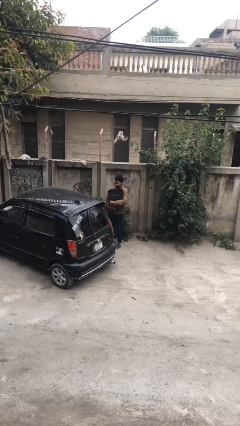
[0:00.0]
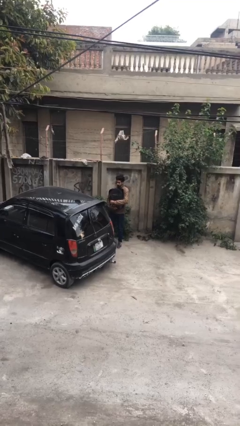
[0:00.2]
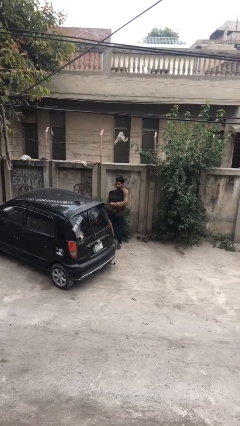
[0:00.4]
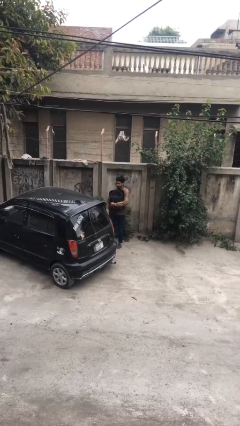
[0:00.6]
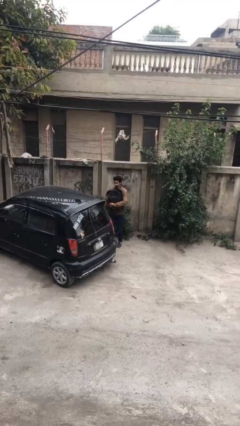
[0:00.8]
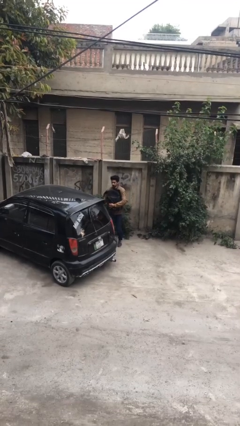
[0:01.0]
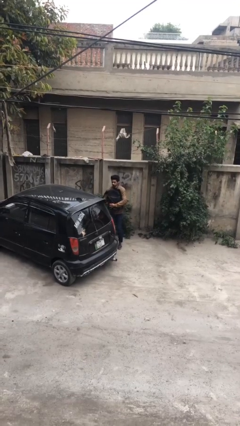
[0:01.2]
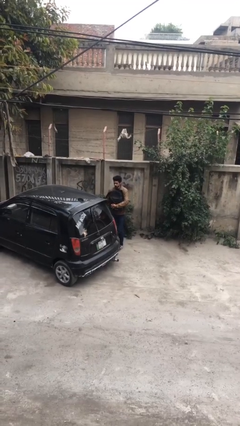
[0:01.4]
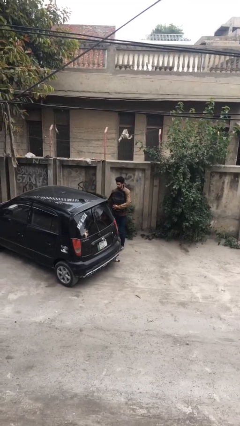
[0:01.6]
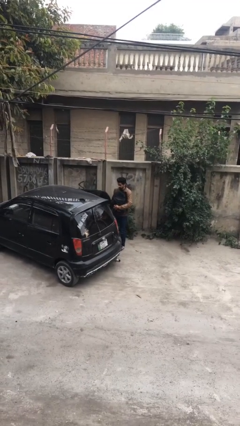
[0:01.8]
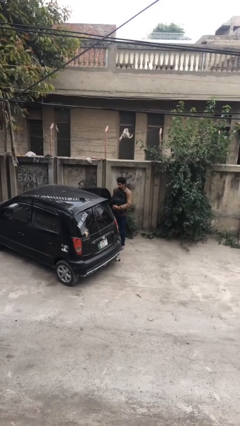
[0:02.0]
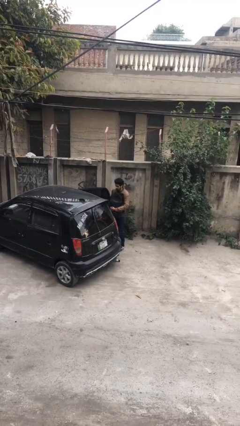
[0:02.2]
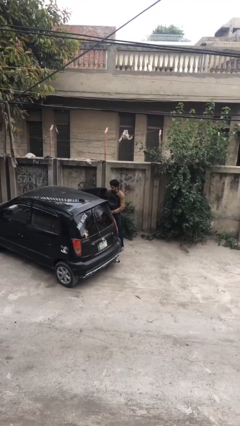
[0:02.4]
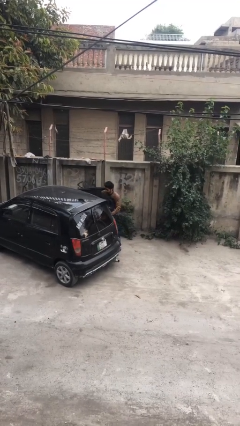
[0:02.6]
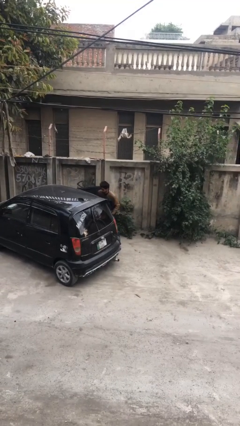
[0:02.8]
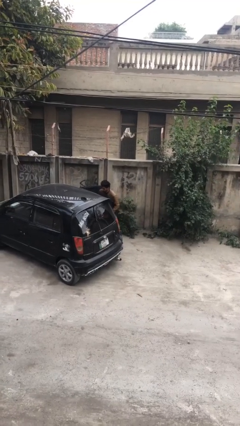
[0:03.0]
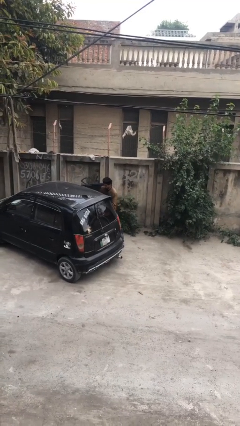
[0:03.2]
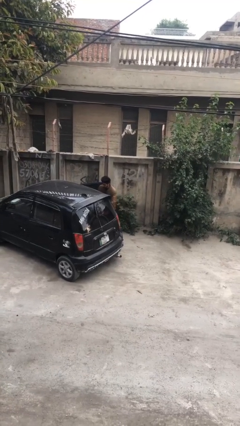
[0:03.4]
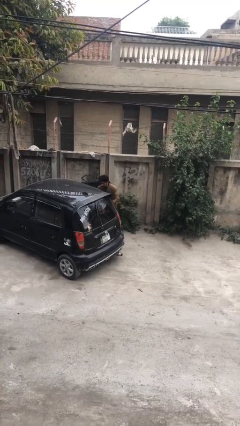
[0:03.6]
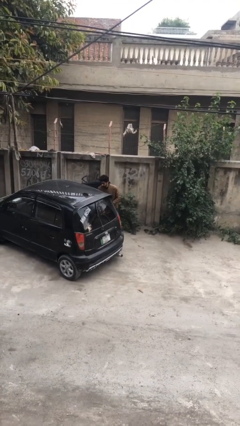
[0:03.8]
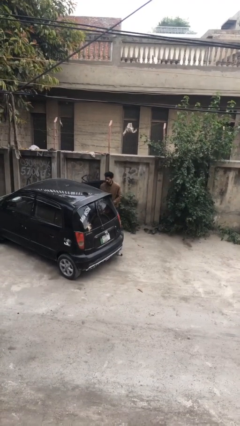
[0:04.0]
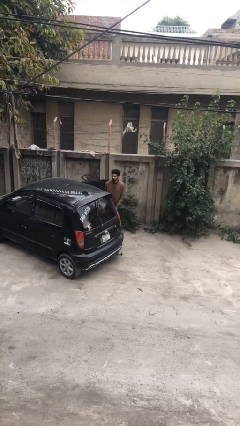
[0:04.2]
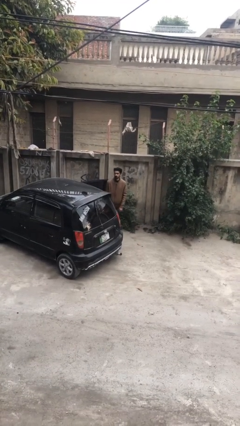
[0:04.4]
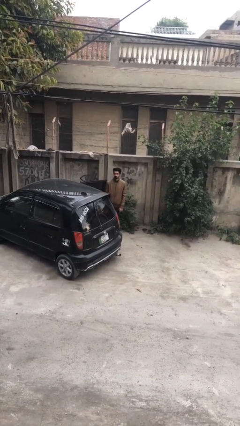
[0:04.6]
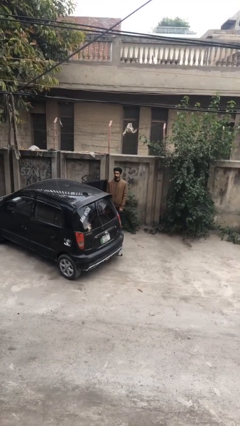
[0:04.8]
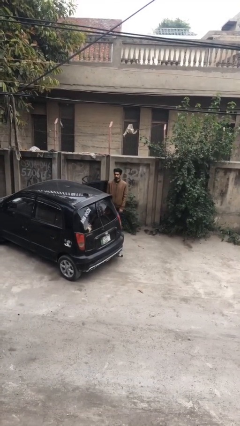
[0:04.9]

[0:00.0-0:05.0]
person loads car

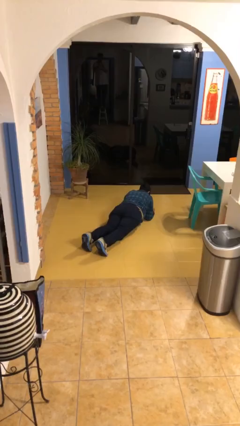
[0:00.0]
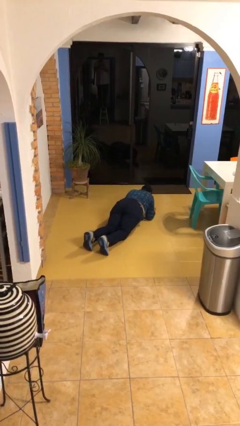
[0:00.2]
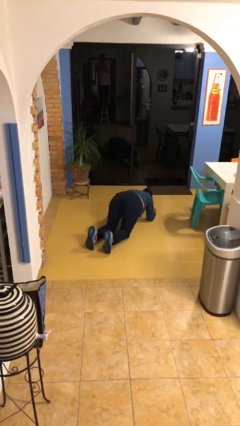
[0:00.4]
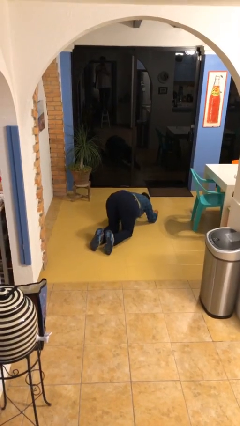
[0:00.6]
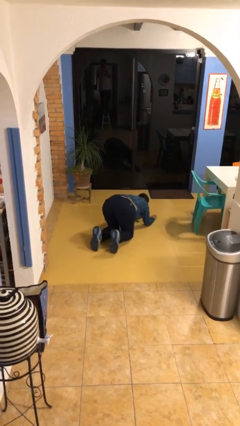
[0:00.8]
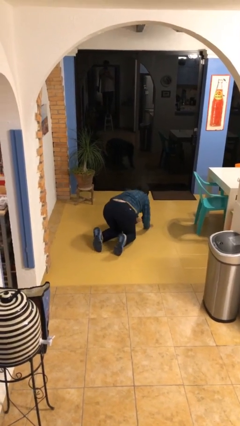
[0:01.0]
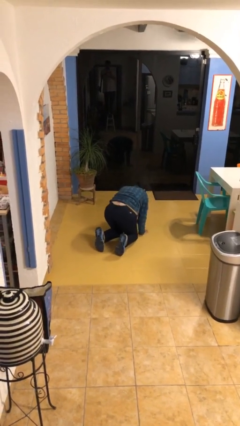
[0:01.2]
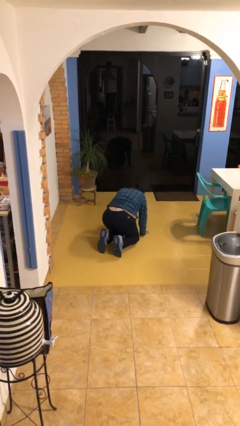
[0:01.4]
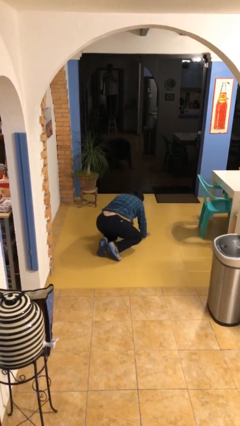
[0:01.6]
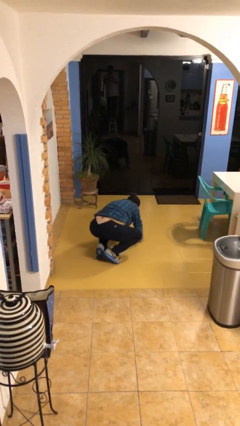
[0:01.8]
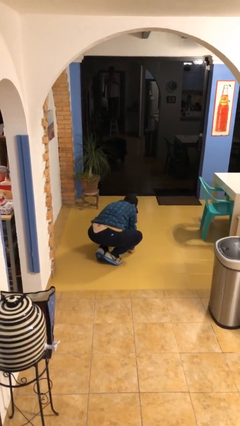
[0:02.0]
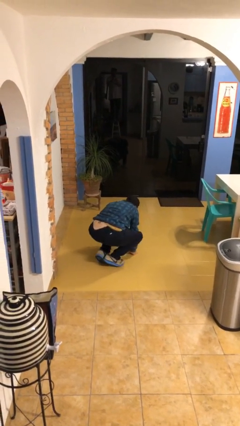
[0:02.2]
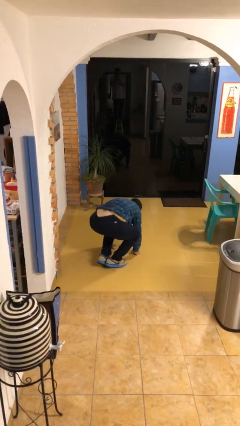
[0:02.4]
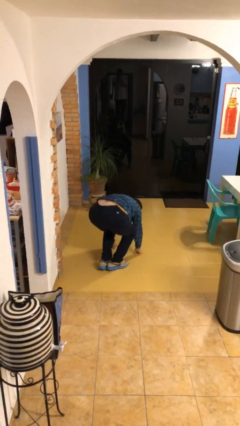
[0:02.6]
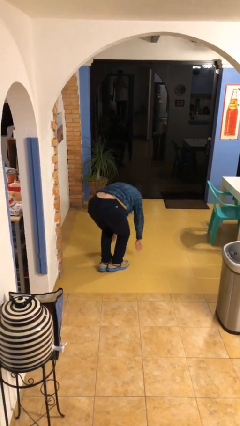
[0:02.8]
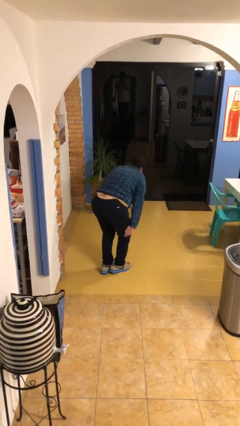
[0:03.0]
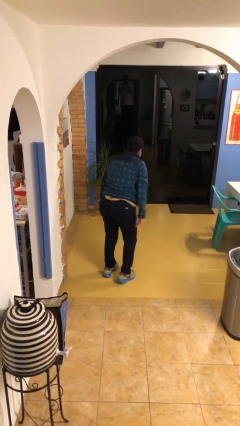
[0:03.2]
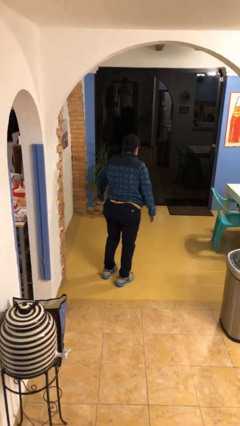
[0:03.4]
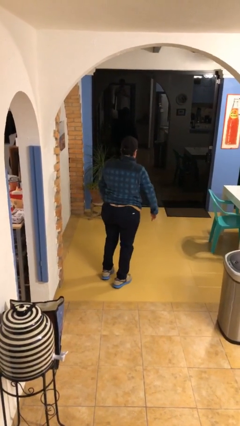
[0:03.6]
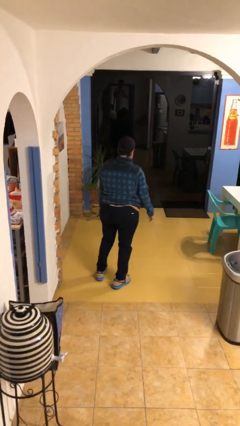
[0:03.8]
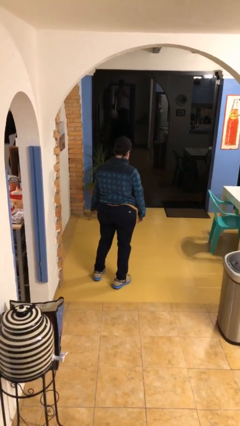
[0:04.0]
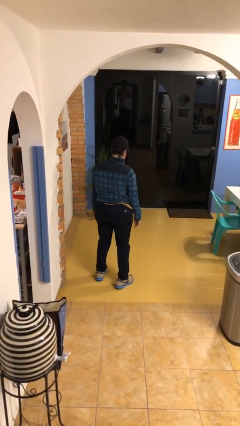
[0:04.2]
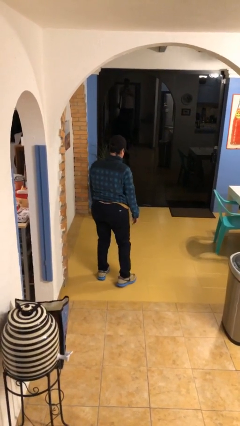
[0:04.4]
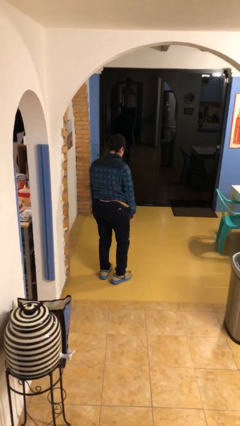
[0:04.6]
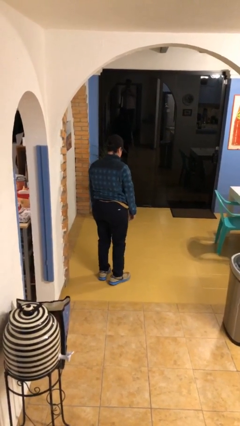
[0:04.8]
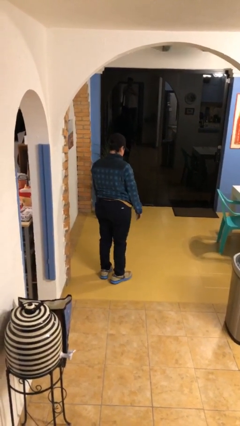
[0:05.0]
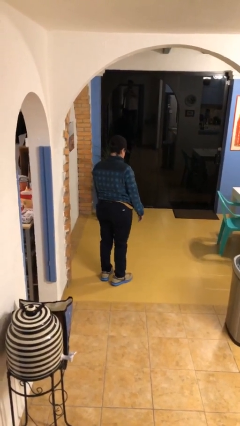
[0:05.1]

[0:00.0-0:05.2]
person stands up from floor

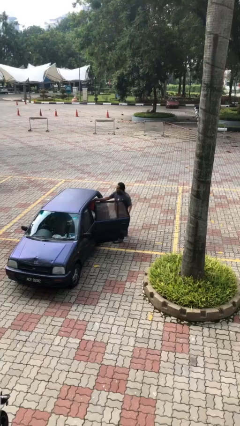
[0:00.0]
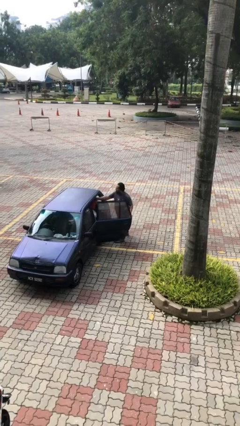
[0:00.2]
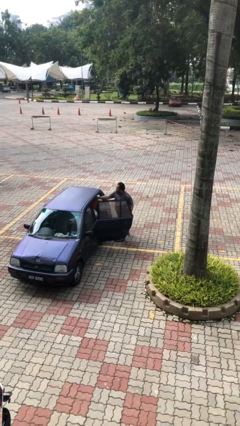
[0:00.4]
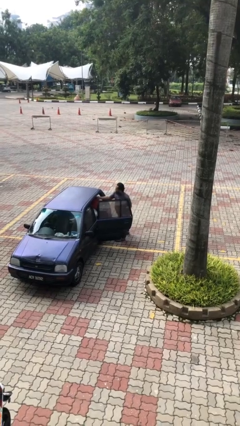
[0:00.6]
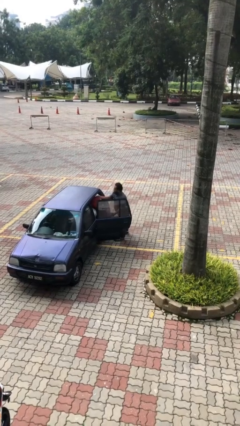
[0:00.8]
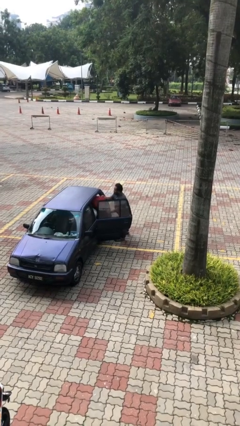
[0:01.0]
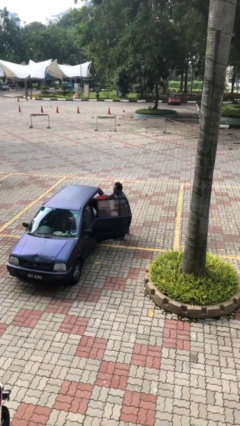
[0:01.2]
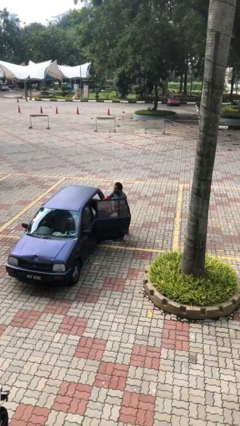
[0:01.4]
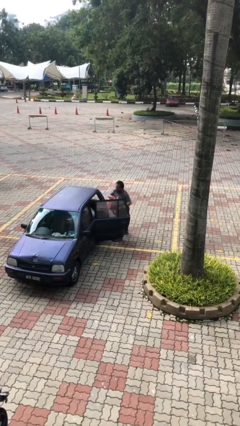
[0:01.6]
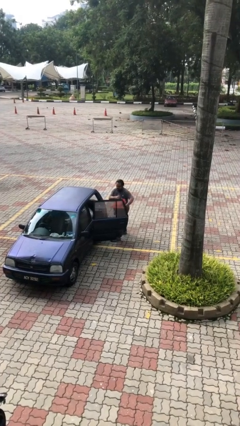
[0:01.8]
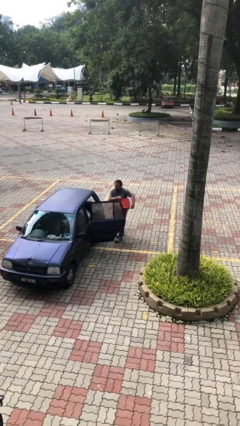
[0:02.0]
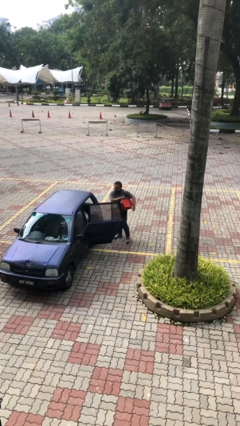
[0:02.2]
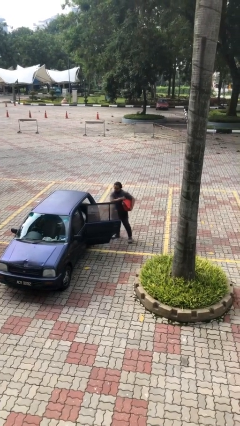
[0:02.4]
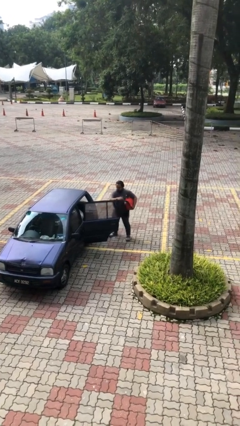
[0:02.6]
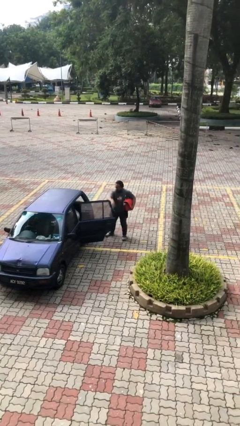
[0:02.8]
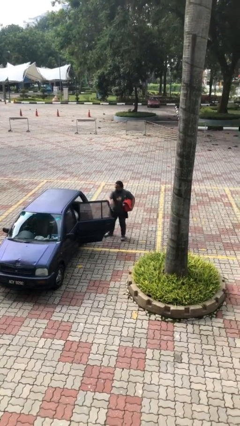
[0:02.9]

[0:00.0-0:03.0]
person unloads car

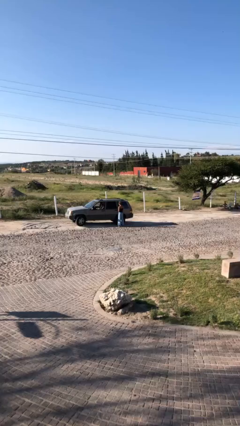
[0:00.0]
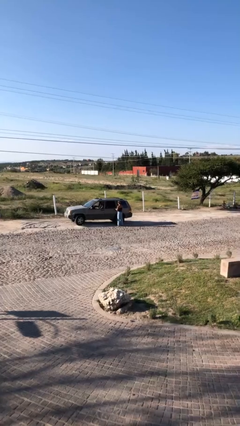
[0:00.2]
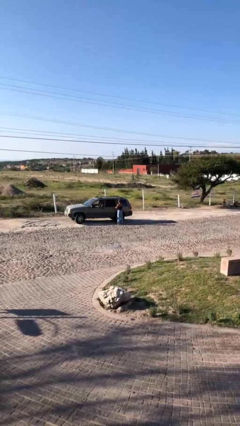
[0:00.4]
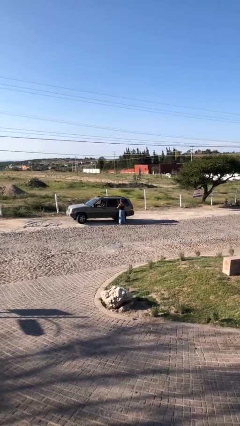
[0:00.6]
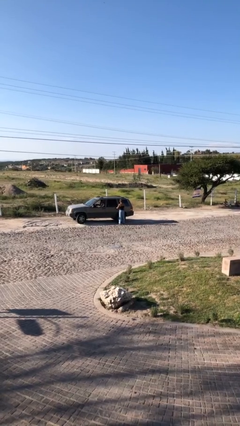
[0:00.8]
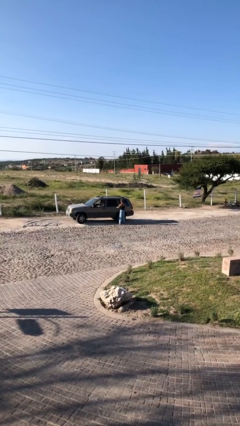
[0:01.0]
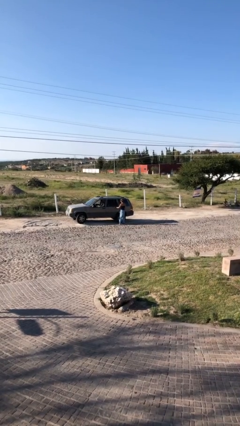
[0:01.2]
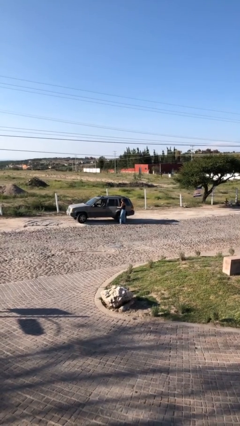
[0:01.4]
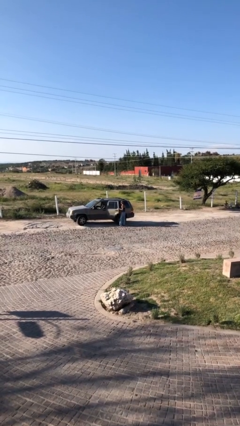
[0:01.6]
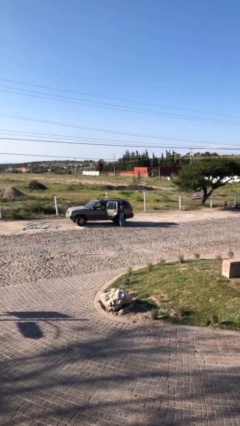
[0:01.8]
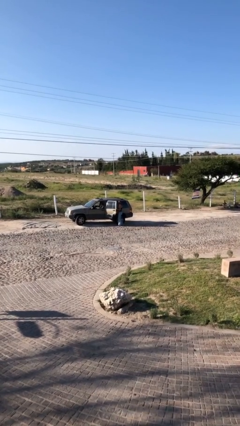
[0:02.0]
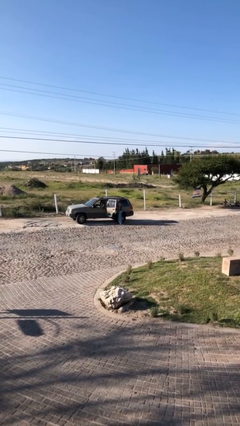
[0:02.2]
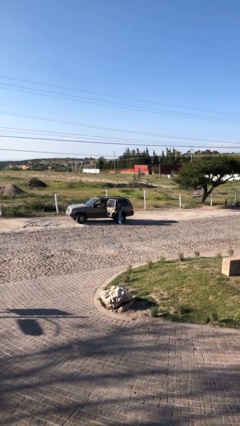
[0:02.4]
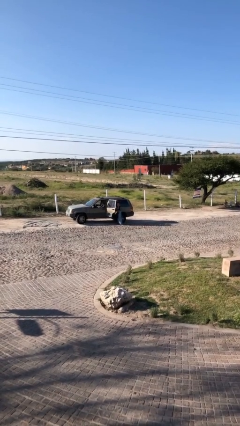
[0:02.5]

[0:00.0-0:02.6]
person opens car door

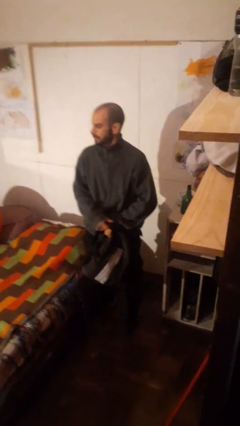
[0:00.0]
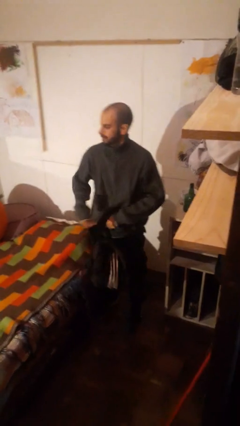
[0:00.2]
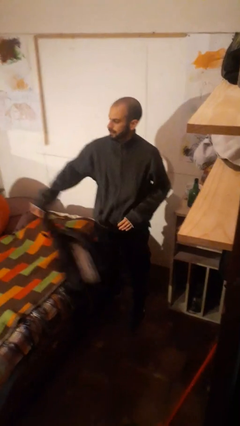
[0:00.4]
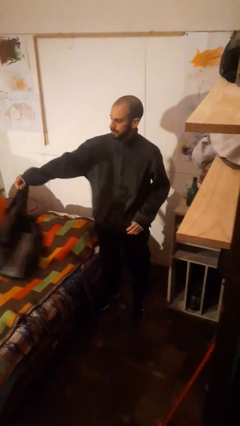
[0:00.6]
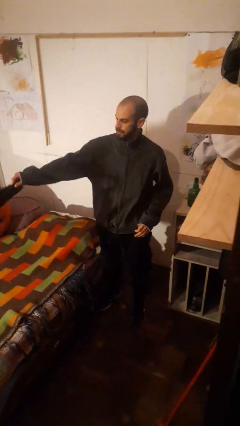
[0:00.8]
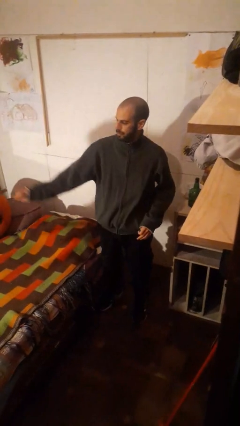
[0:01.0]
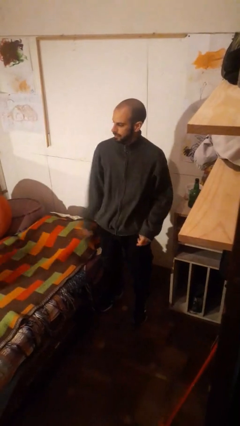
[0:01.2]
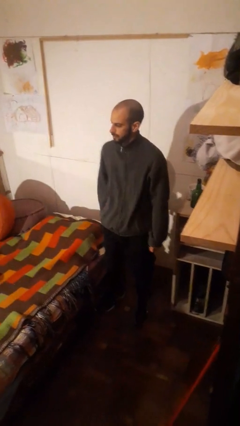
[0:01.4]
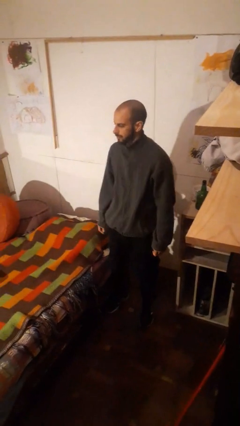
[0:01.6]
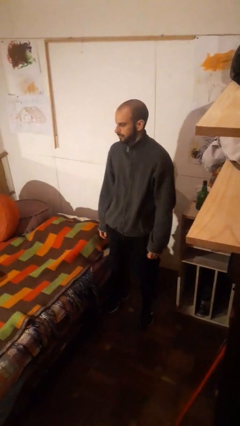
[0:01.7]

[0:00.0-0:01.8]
person throws object on bed

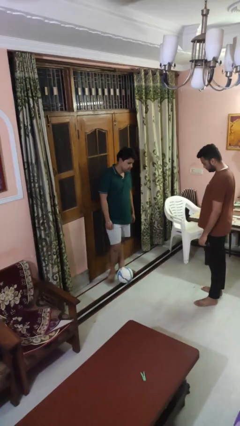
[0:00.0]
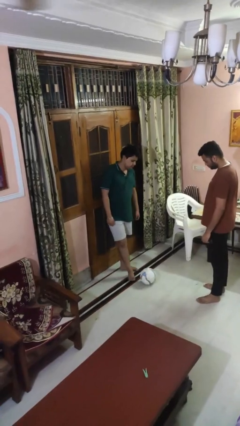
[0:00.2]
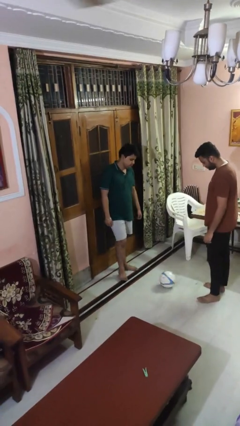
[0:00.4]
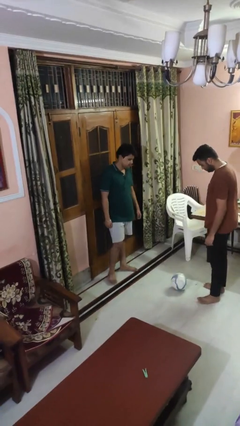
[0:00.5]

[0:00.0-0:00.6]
person kicks object to person
